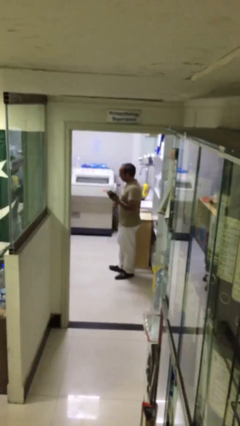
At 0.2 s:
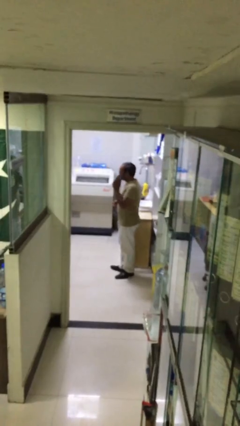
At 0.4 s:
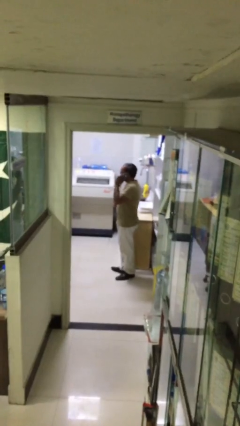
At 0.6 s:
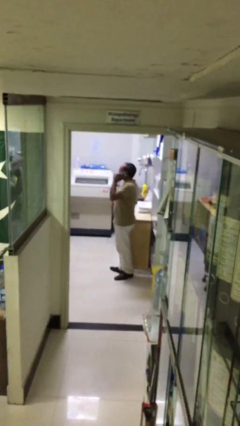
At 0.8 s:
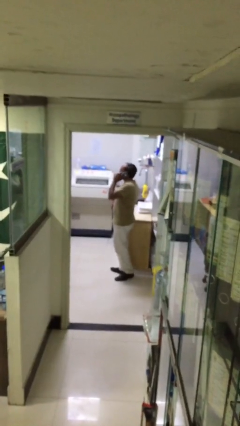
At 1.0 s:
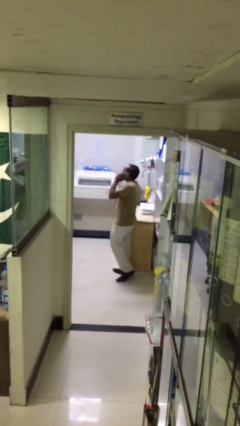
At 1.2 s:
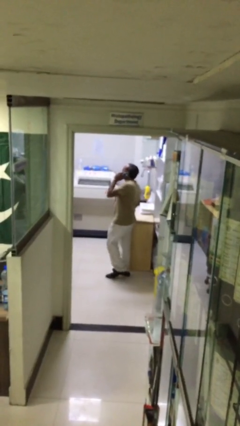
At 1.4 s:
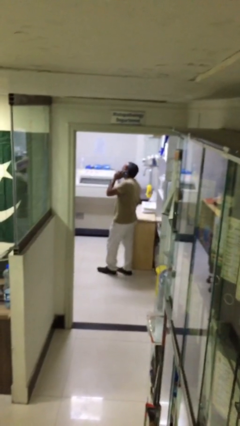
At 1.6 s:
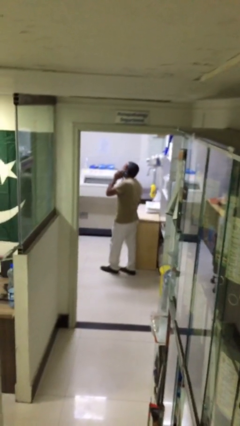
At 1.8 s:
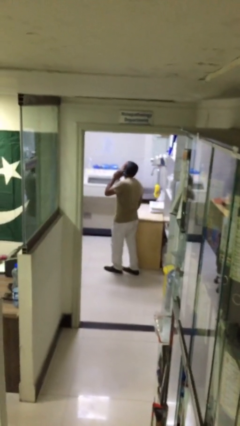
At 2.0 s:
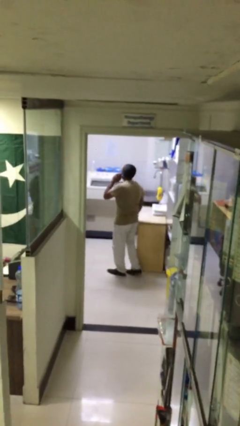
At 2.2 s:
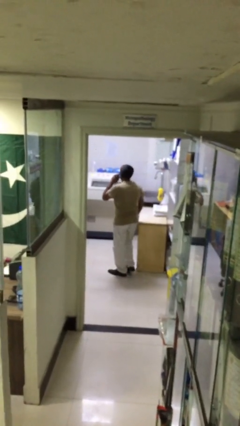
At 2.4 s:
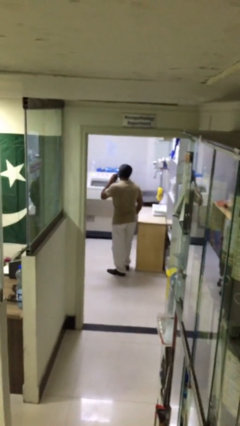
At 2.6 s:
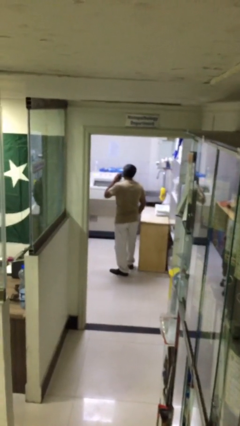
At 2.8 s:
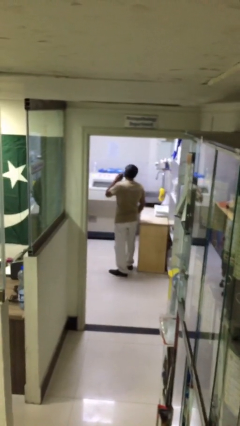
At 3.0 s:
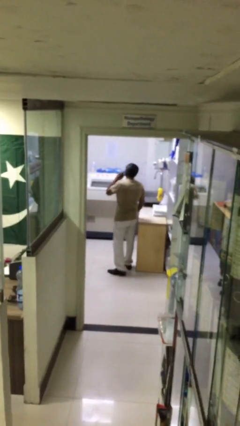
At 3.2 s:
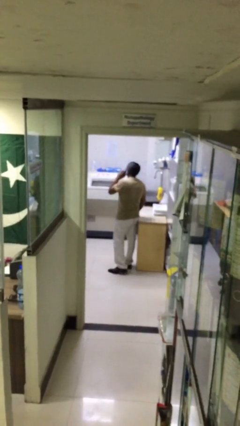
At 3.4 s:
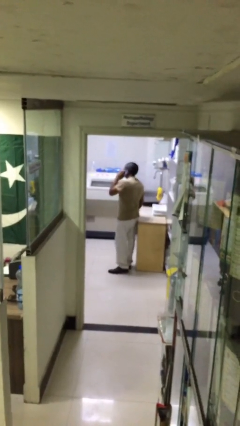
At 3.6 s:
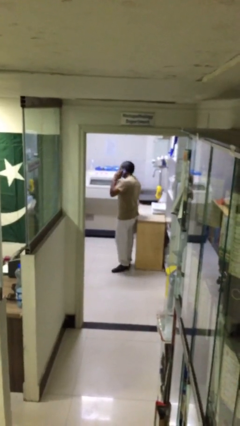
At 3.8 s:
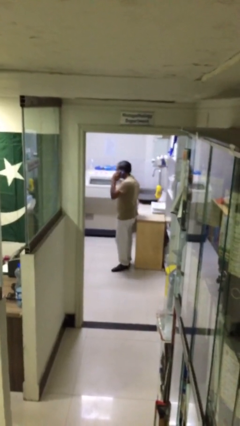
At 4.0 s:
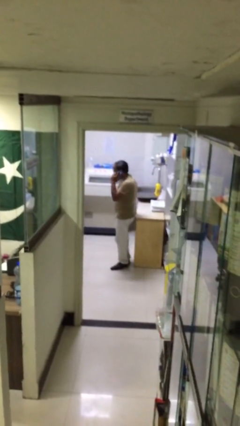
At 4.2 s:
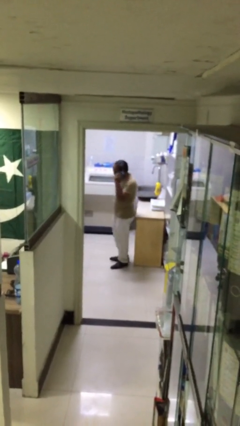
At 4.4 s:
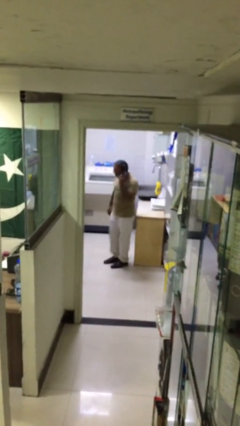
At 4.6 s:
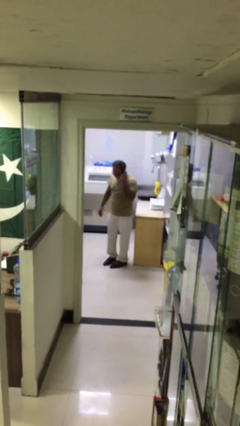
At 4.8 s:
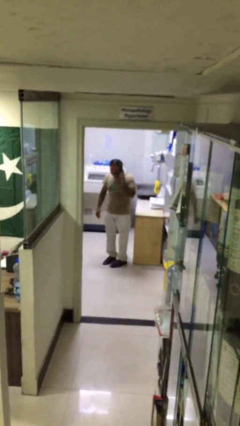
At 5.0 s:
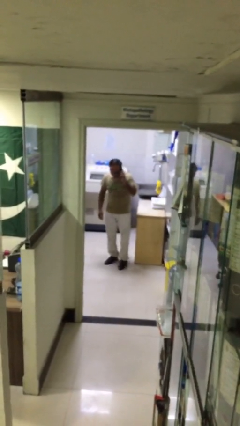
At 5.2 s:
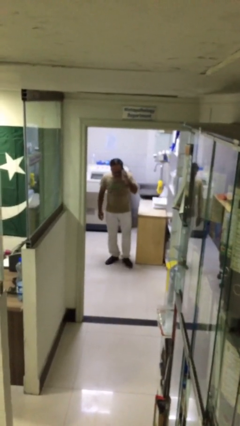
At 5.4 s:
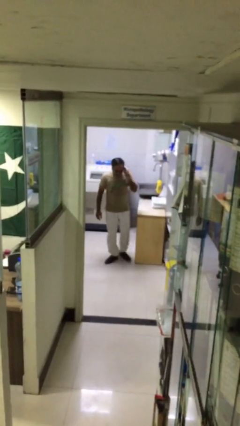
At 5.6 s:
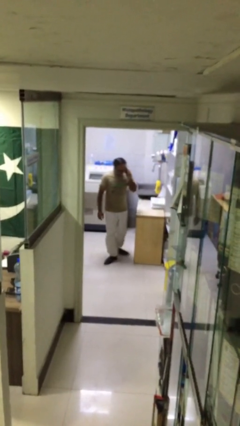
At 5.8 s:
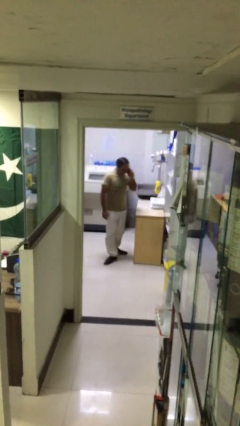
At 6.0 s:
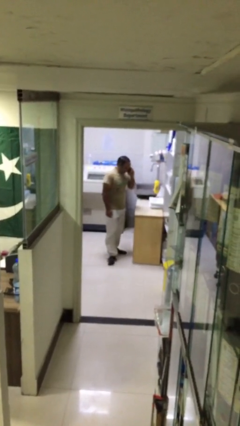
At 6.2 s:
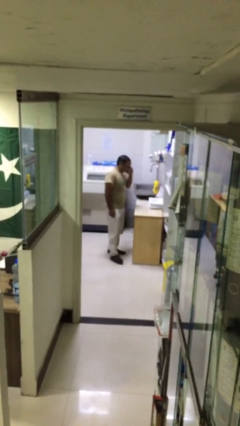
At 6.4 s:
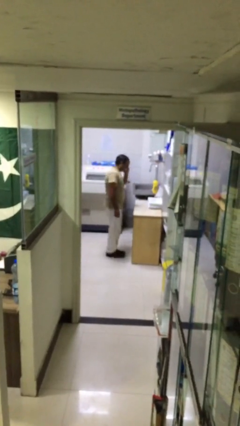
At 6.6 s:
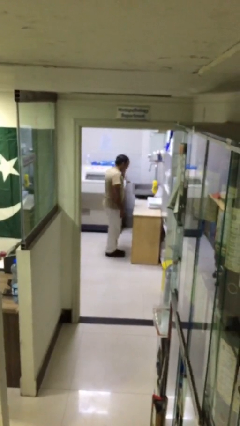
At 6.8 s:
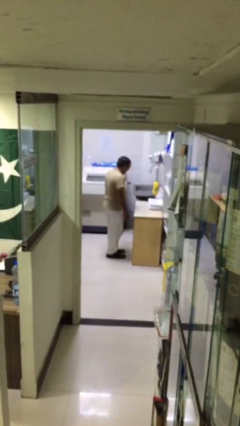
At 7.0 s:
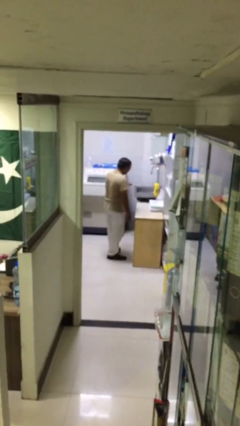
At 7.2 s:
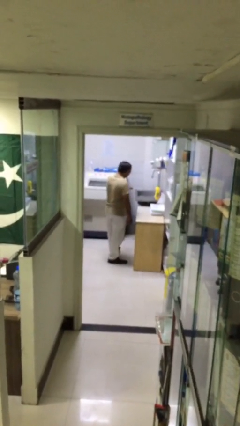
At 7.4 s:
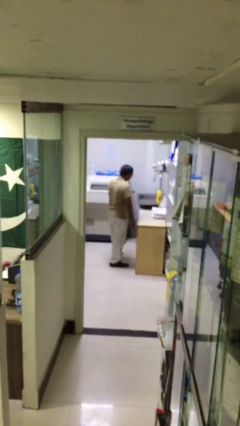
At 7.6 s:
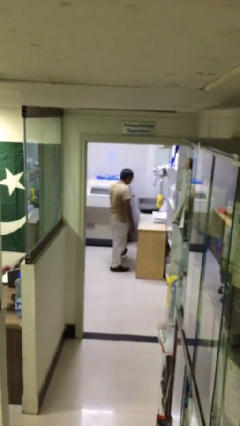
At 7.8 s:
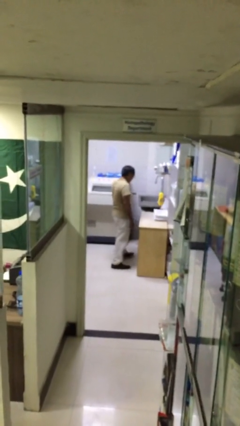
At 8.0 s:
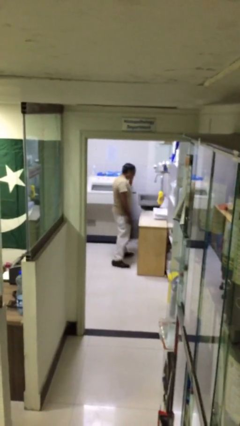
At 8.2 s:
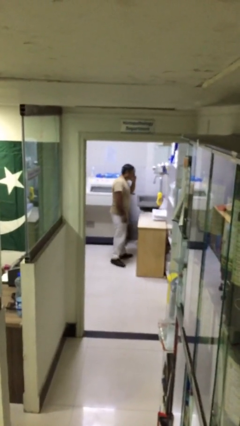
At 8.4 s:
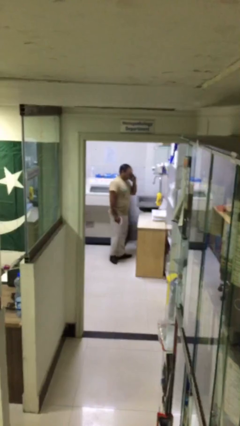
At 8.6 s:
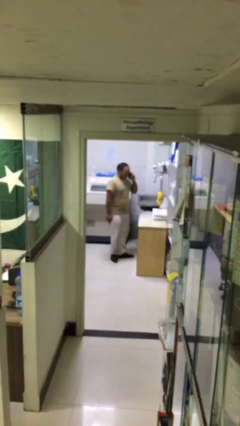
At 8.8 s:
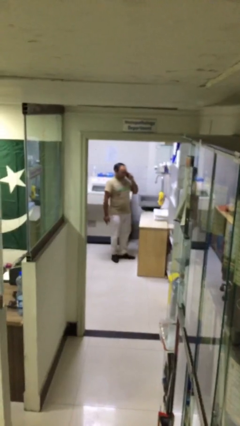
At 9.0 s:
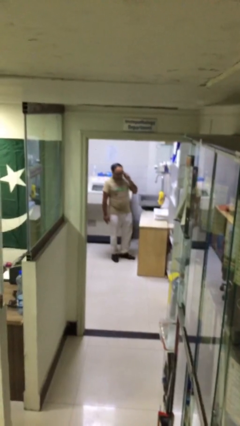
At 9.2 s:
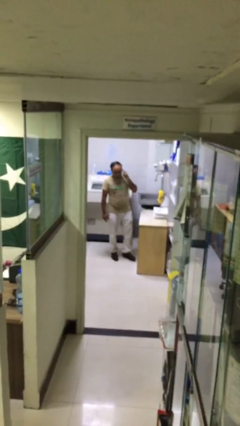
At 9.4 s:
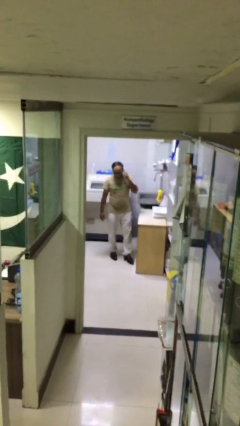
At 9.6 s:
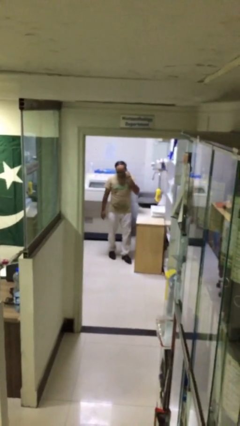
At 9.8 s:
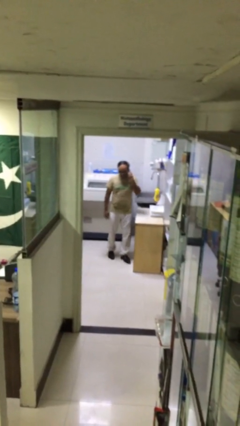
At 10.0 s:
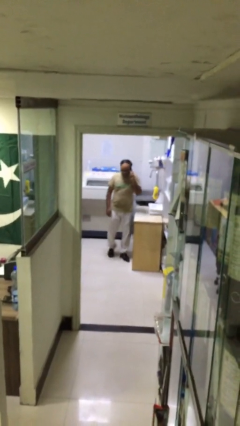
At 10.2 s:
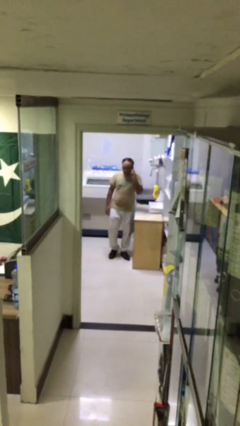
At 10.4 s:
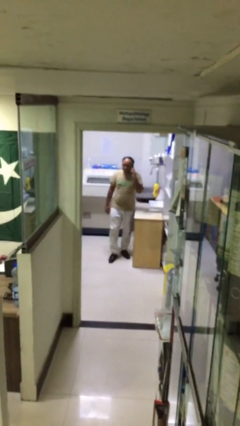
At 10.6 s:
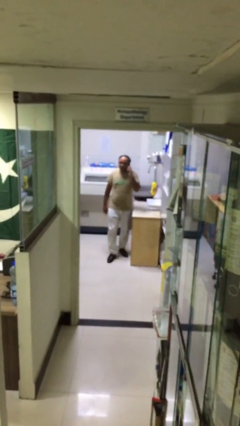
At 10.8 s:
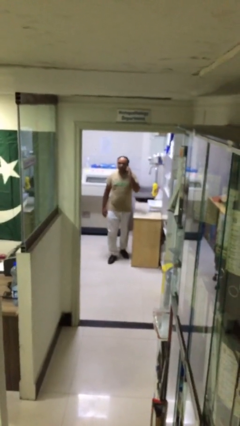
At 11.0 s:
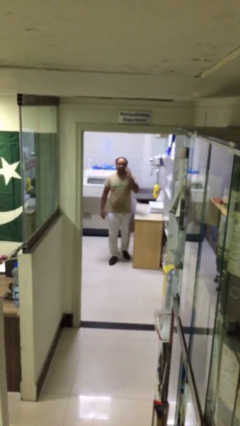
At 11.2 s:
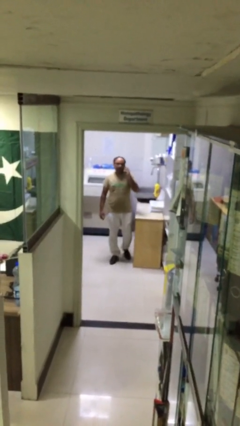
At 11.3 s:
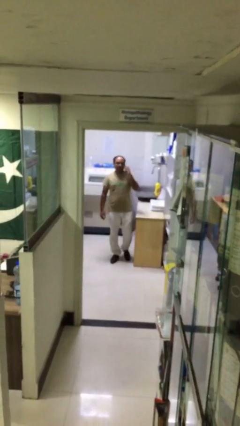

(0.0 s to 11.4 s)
person talks on phone

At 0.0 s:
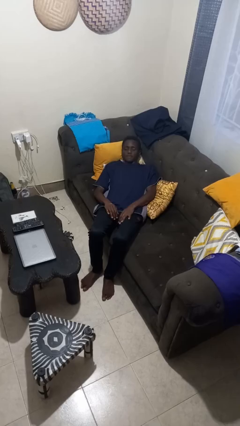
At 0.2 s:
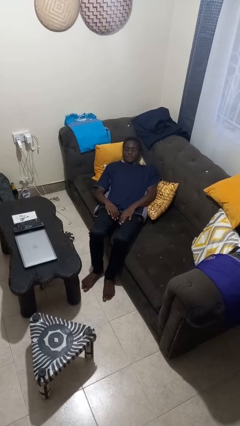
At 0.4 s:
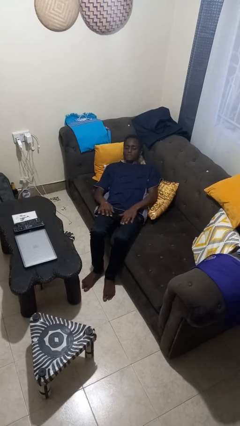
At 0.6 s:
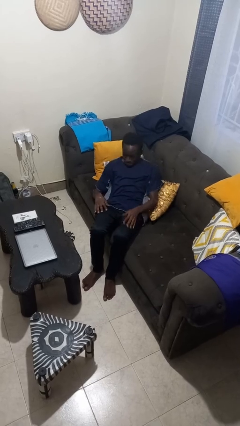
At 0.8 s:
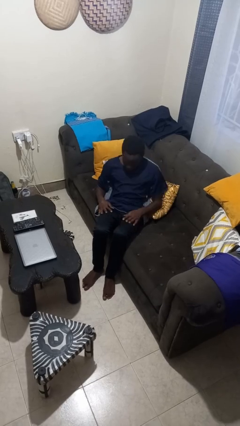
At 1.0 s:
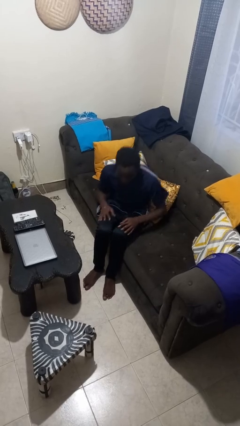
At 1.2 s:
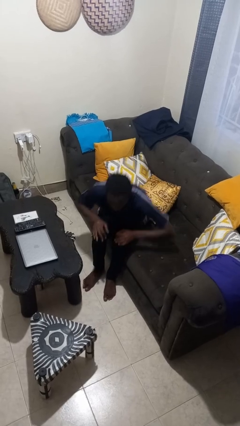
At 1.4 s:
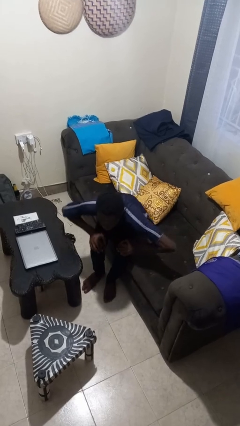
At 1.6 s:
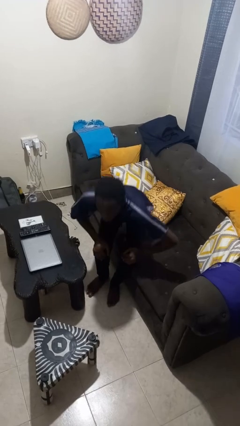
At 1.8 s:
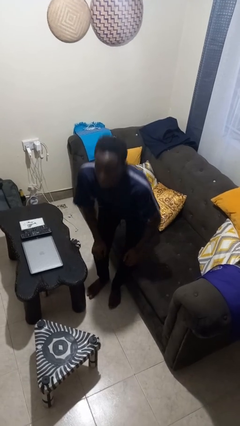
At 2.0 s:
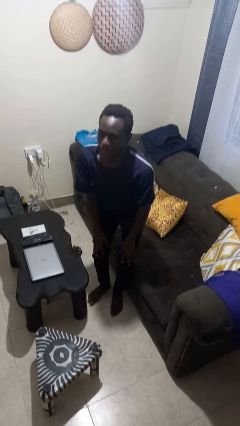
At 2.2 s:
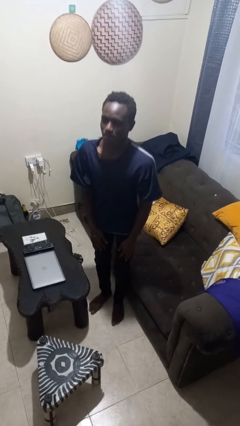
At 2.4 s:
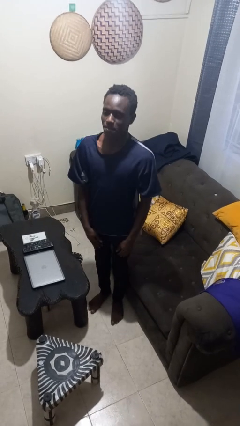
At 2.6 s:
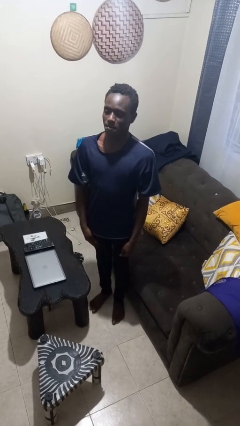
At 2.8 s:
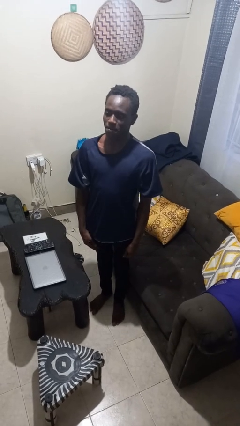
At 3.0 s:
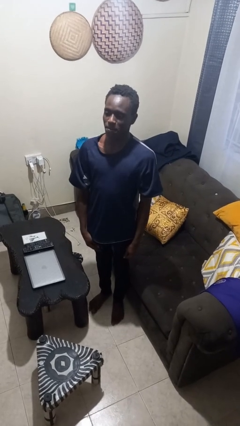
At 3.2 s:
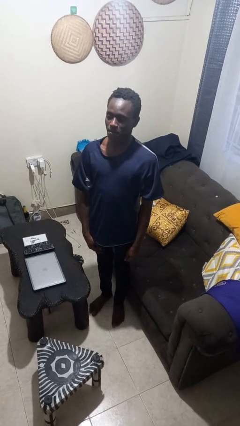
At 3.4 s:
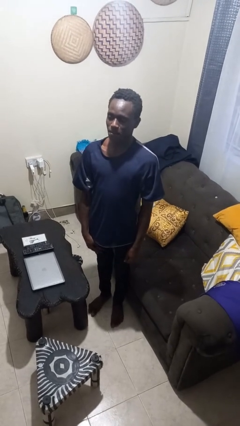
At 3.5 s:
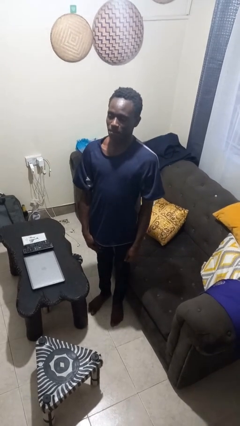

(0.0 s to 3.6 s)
person stands up

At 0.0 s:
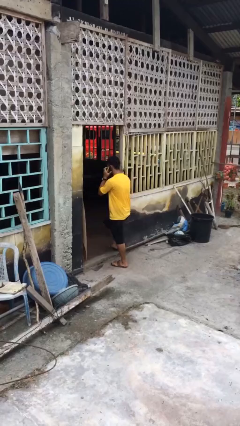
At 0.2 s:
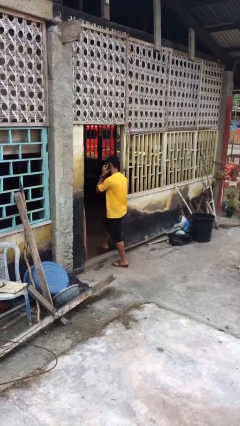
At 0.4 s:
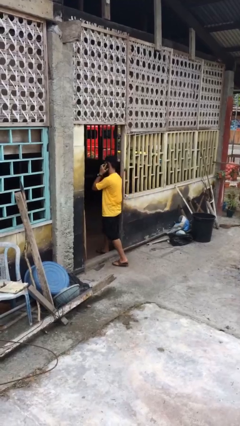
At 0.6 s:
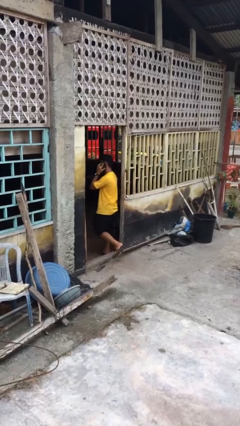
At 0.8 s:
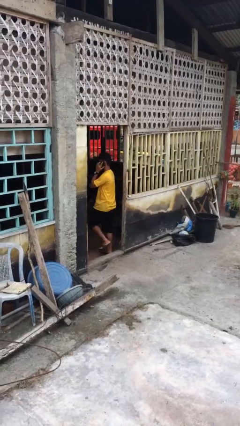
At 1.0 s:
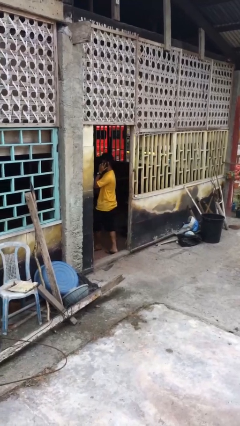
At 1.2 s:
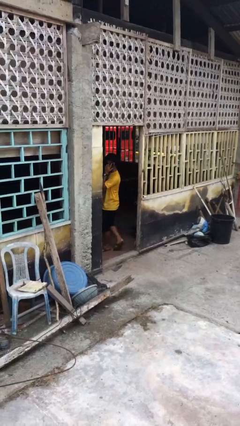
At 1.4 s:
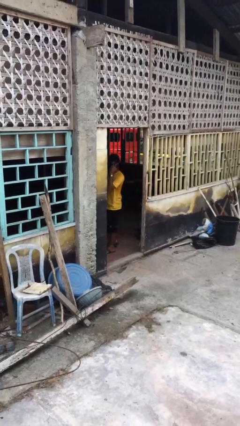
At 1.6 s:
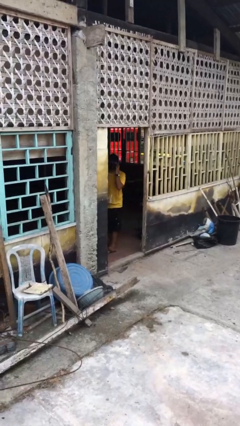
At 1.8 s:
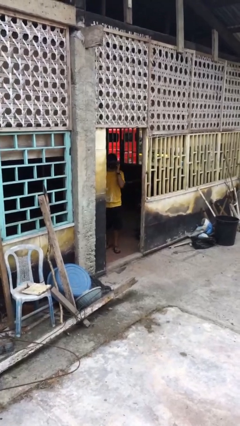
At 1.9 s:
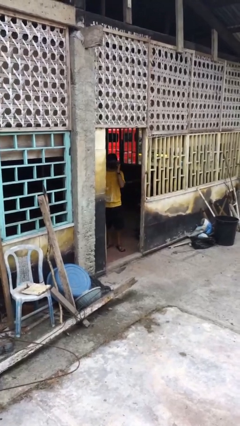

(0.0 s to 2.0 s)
person exits scene through structure

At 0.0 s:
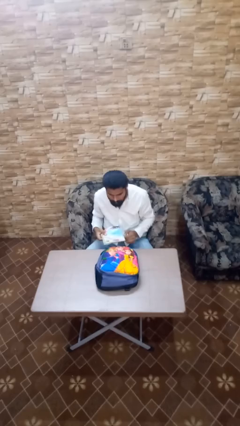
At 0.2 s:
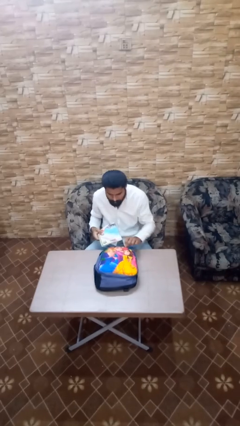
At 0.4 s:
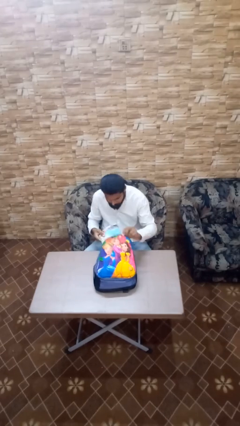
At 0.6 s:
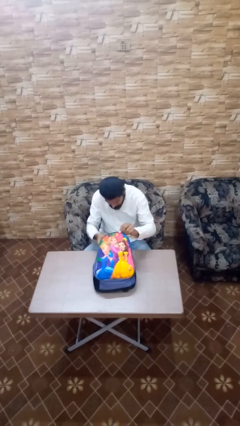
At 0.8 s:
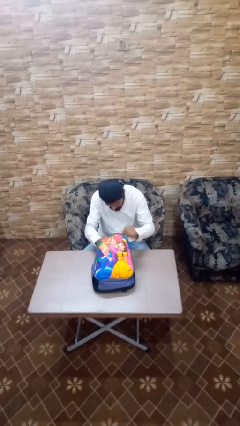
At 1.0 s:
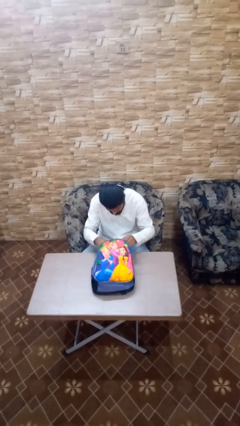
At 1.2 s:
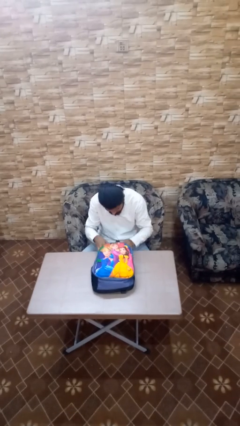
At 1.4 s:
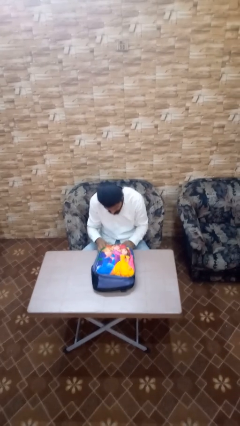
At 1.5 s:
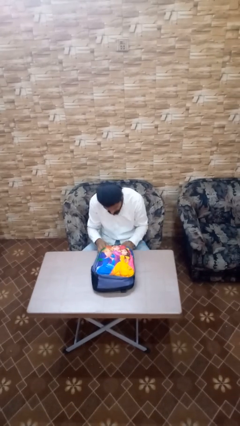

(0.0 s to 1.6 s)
person puts object into backpack
